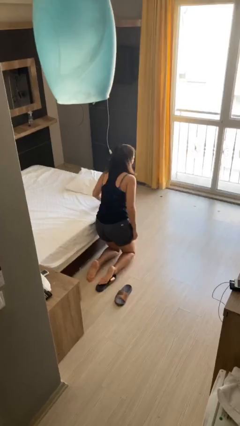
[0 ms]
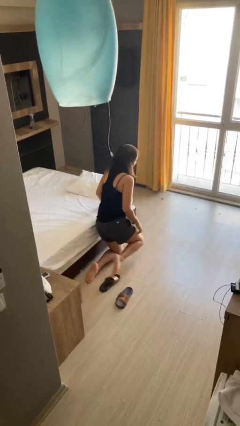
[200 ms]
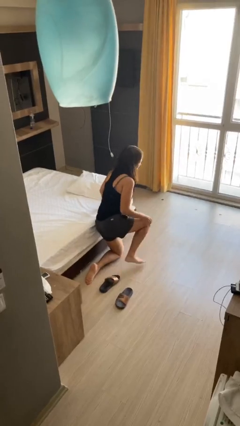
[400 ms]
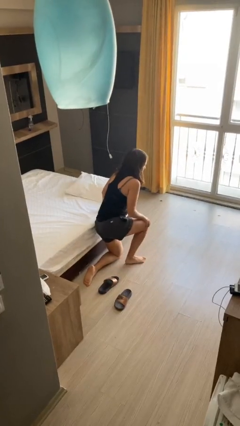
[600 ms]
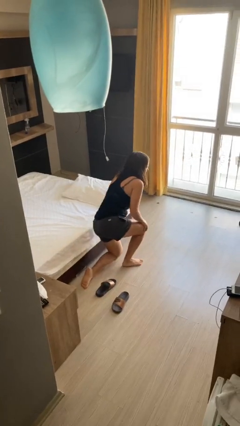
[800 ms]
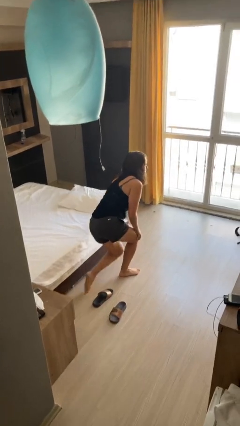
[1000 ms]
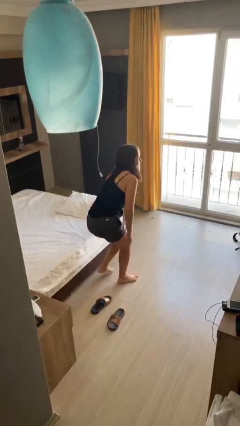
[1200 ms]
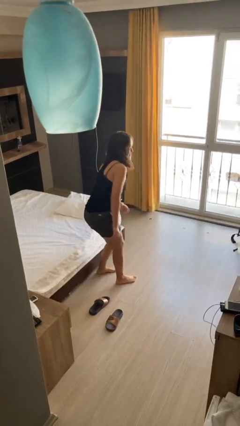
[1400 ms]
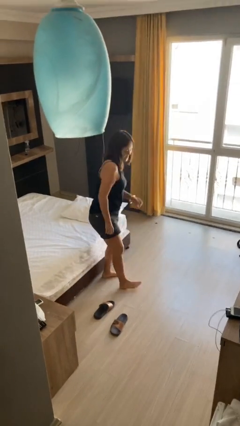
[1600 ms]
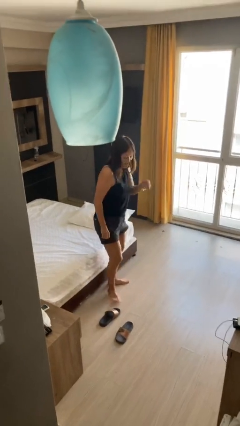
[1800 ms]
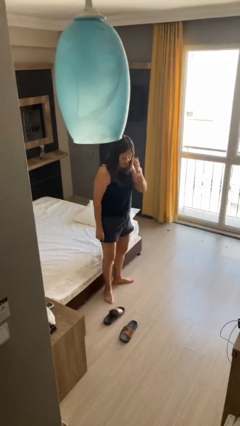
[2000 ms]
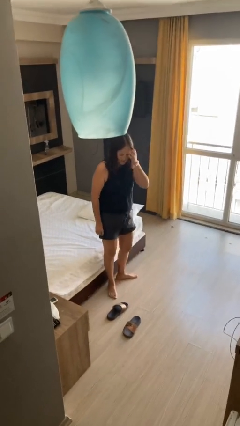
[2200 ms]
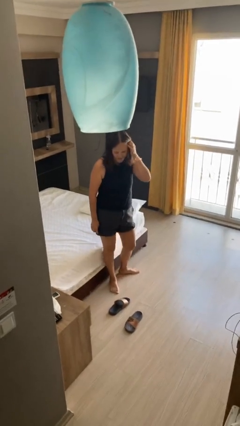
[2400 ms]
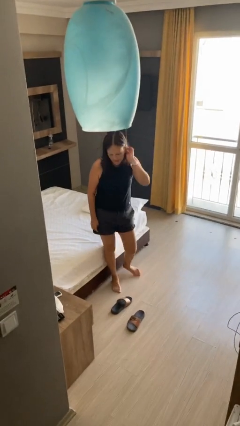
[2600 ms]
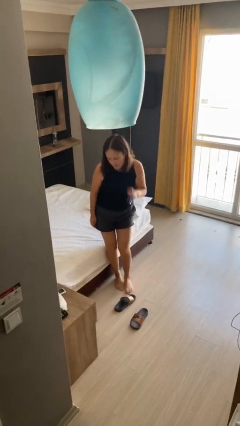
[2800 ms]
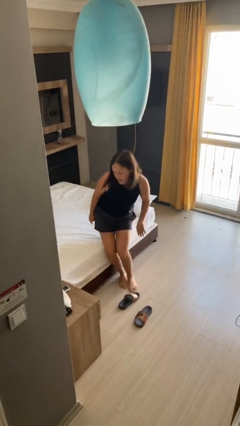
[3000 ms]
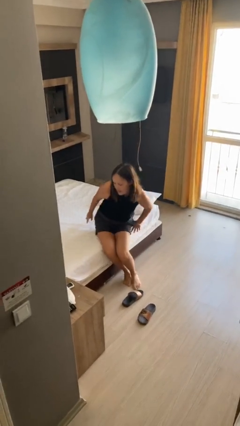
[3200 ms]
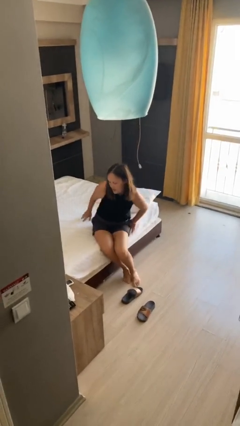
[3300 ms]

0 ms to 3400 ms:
person stands up from floor

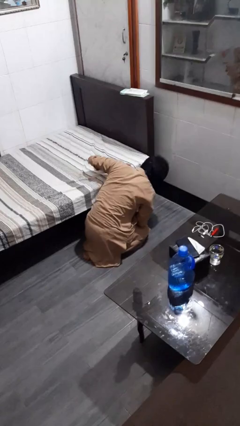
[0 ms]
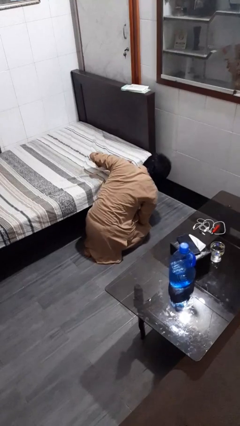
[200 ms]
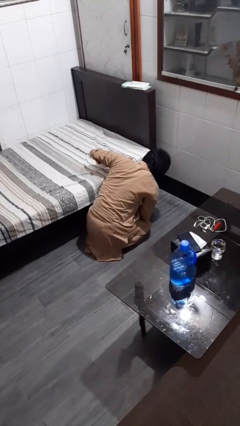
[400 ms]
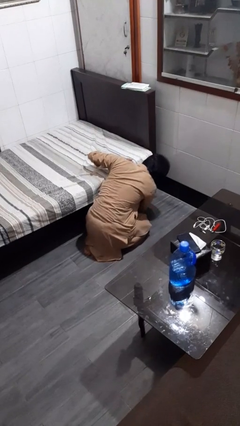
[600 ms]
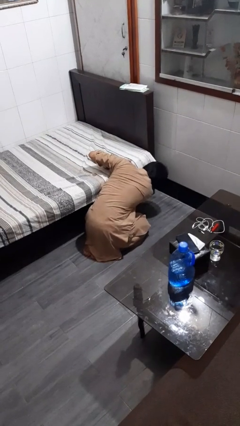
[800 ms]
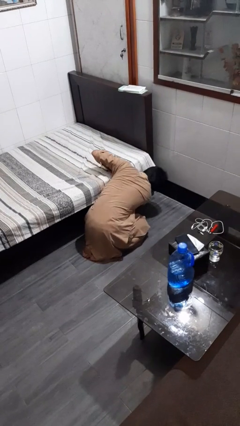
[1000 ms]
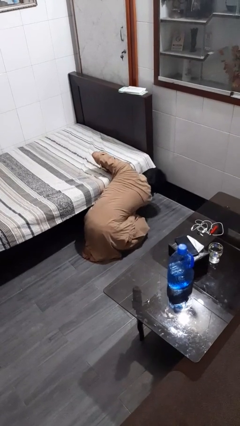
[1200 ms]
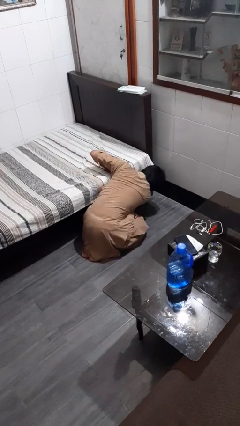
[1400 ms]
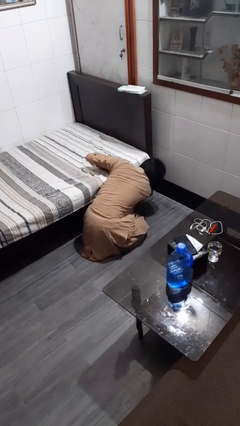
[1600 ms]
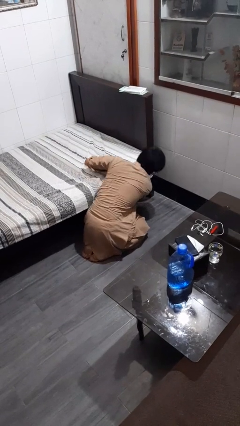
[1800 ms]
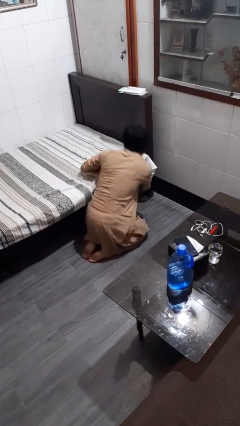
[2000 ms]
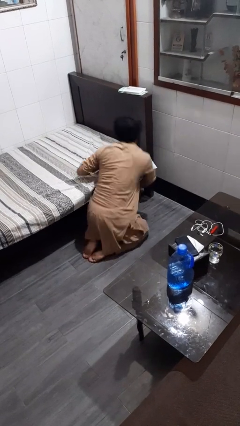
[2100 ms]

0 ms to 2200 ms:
person searches under bed

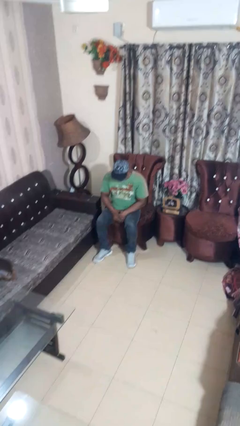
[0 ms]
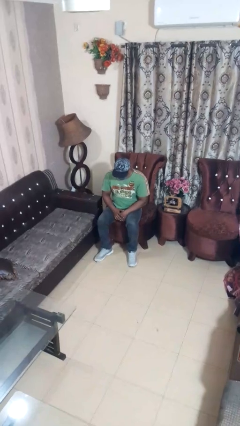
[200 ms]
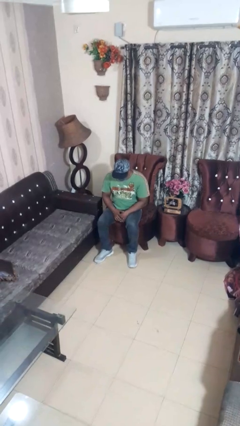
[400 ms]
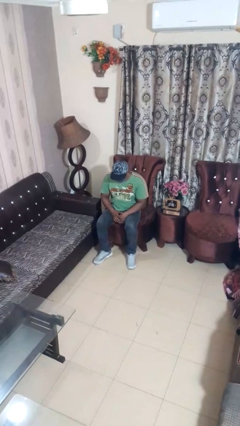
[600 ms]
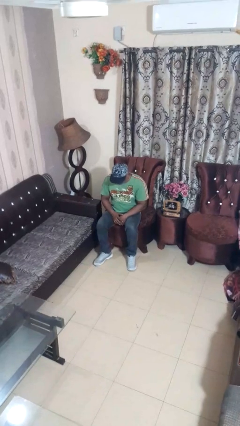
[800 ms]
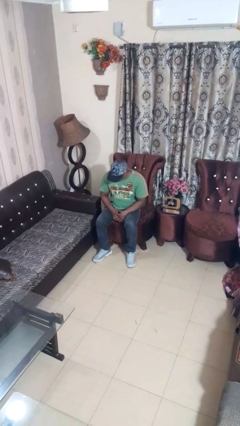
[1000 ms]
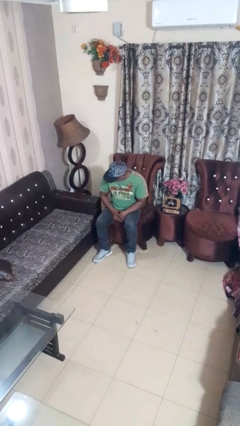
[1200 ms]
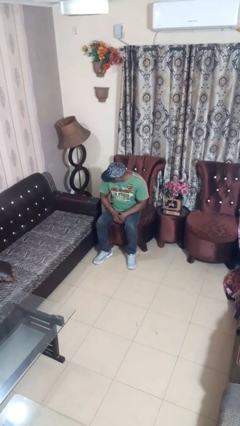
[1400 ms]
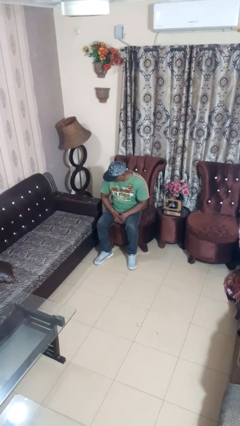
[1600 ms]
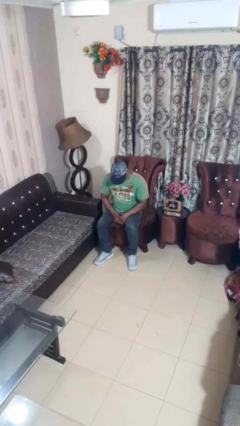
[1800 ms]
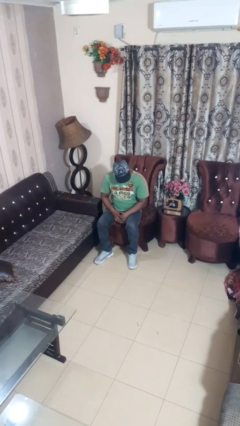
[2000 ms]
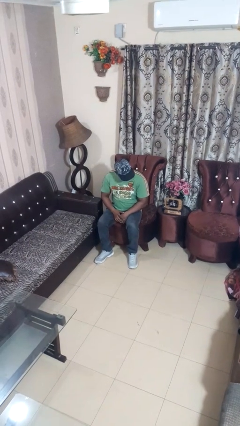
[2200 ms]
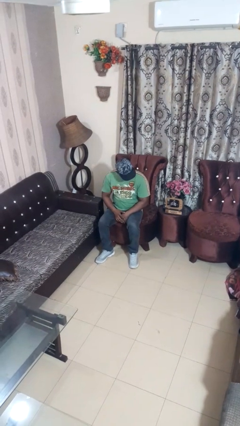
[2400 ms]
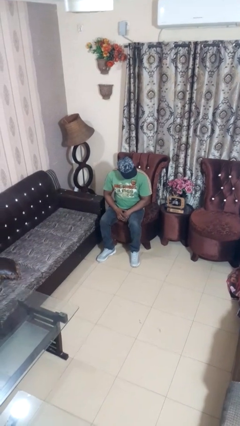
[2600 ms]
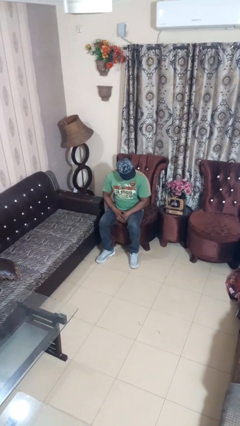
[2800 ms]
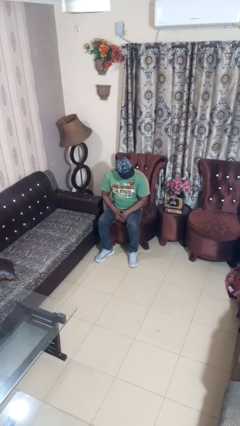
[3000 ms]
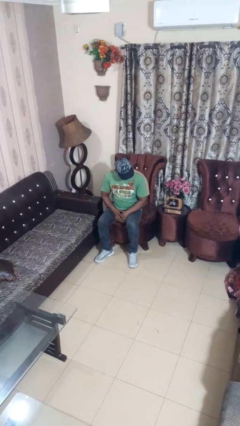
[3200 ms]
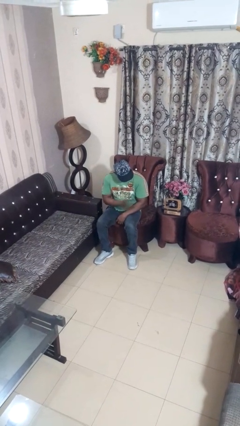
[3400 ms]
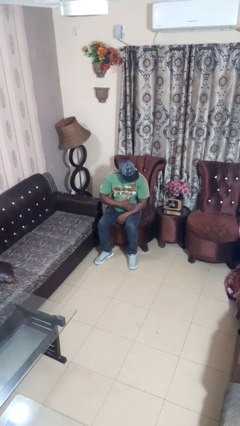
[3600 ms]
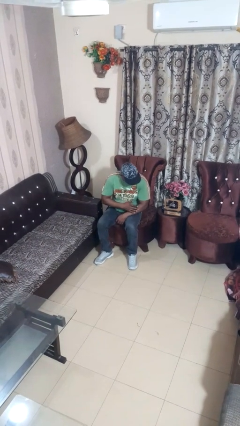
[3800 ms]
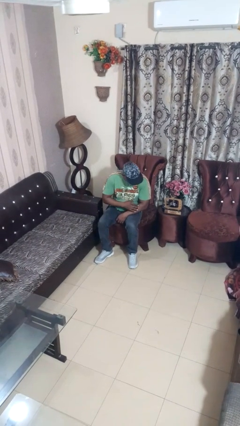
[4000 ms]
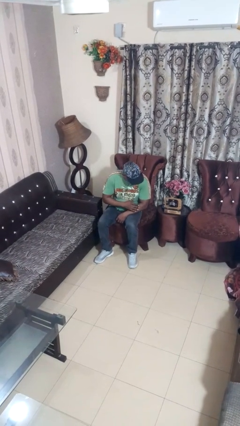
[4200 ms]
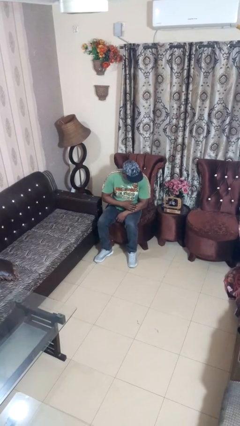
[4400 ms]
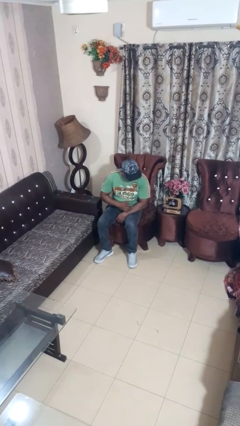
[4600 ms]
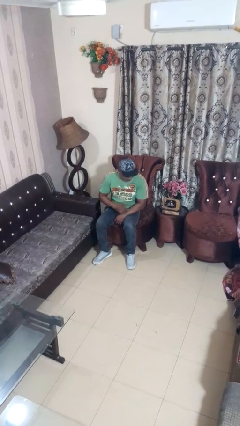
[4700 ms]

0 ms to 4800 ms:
person swats bug

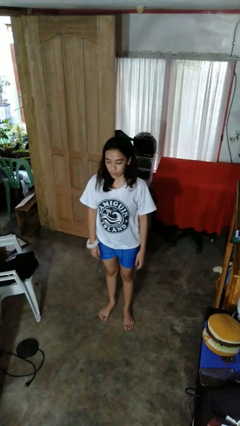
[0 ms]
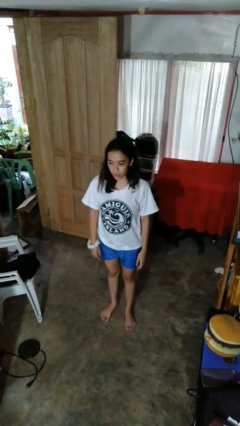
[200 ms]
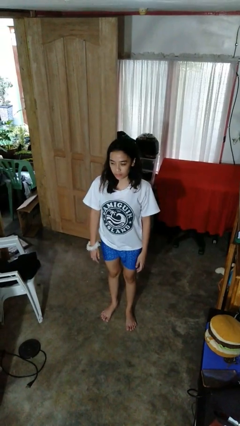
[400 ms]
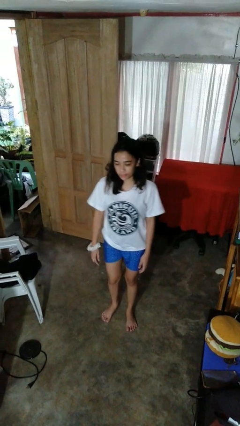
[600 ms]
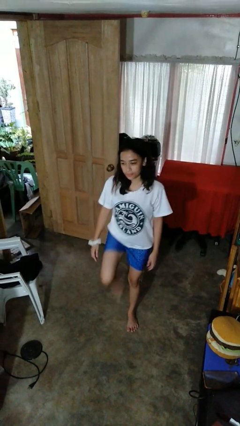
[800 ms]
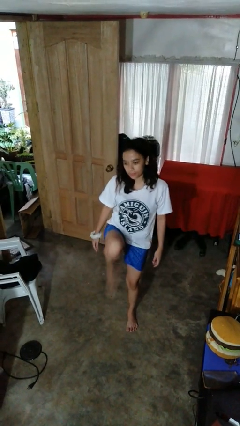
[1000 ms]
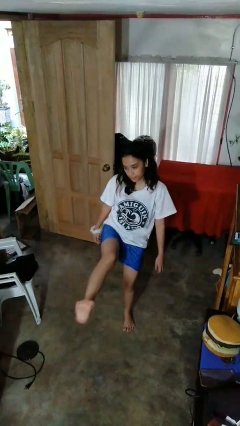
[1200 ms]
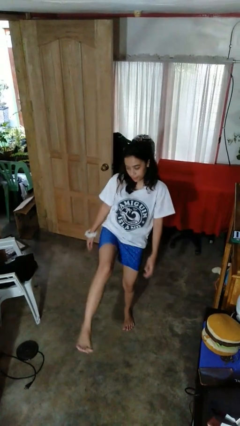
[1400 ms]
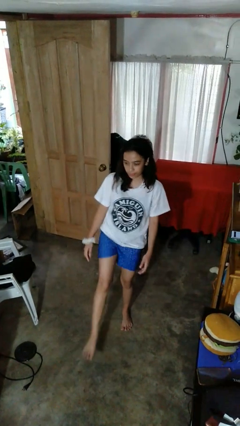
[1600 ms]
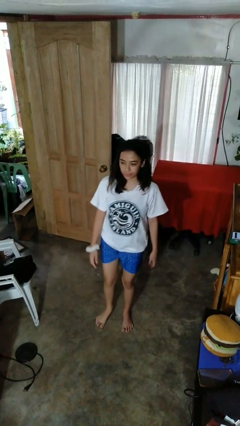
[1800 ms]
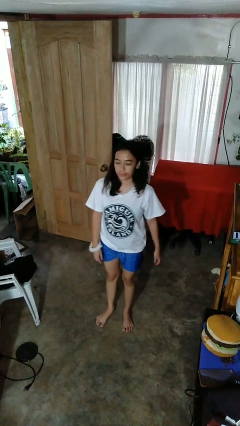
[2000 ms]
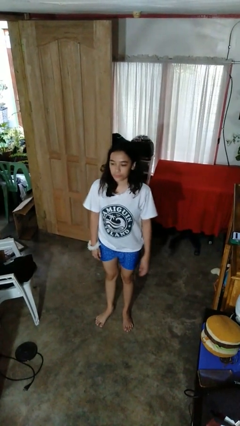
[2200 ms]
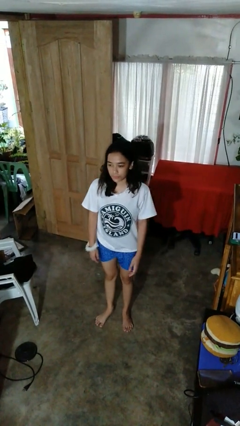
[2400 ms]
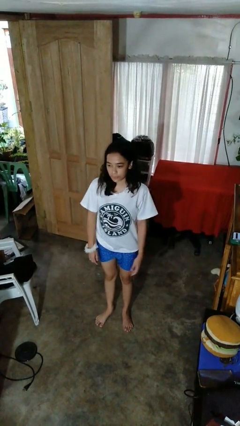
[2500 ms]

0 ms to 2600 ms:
person karate kicks

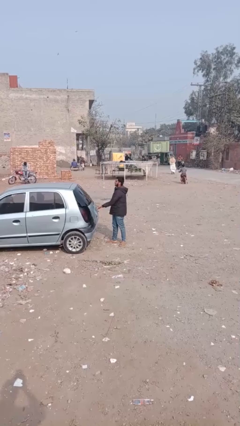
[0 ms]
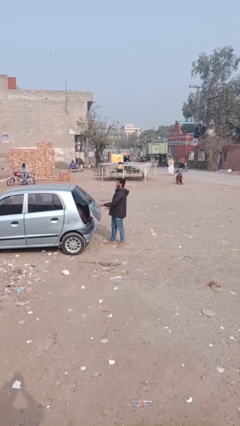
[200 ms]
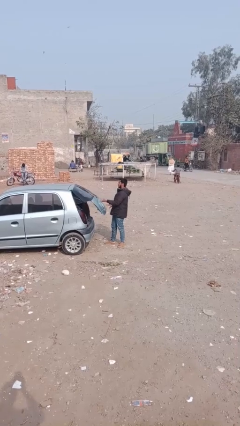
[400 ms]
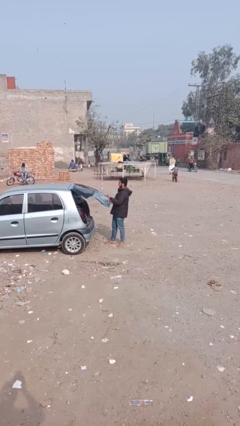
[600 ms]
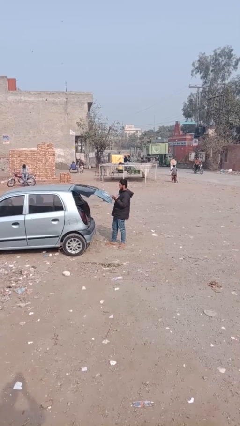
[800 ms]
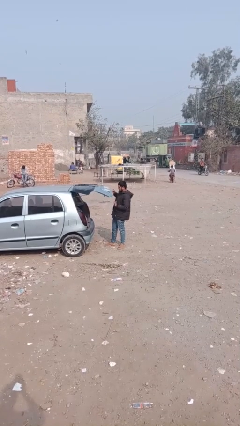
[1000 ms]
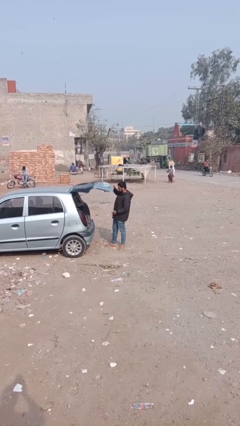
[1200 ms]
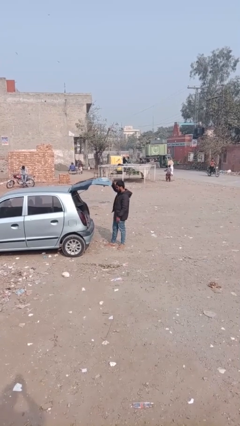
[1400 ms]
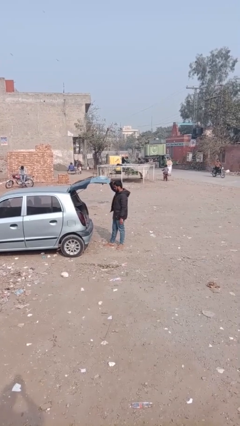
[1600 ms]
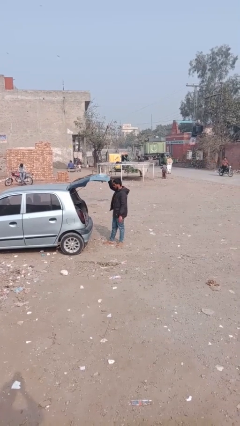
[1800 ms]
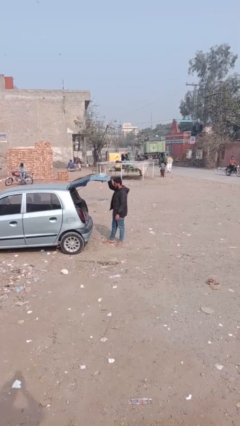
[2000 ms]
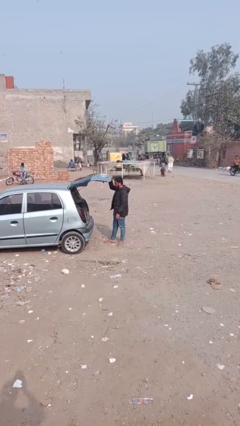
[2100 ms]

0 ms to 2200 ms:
person opens car trunk

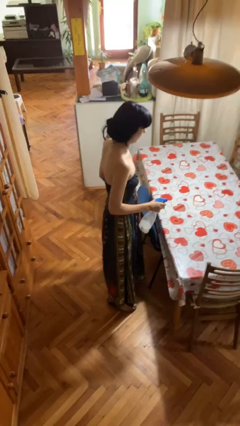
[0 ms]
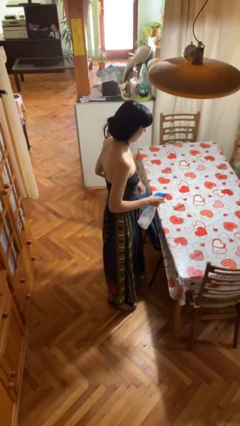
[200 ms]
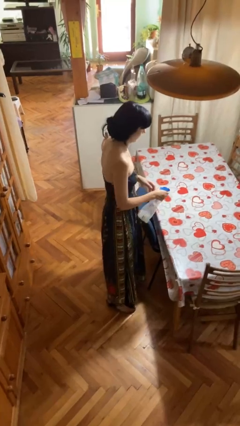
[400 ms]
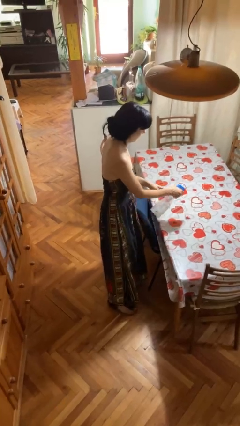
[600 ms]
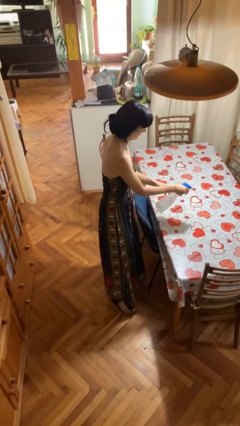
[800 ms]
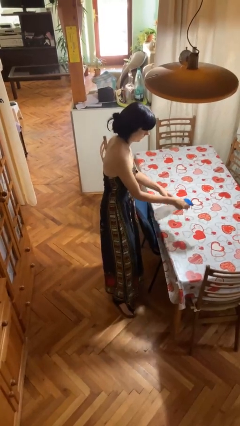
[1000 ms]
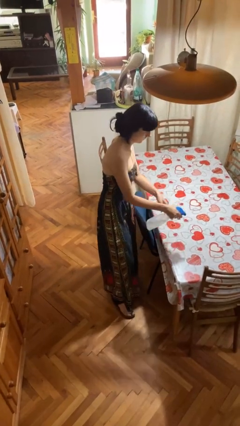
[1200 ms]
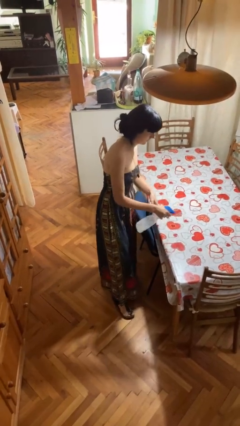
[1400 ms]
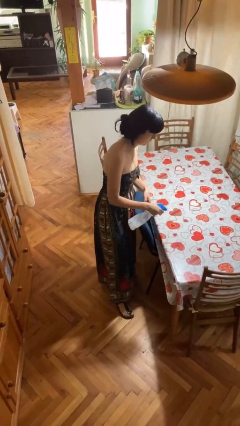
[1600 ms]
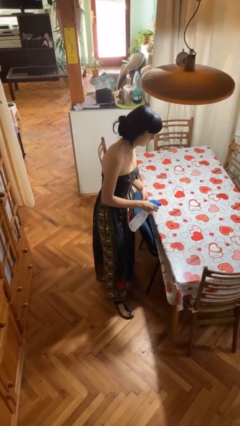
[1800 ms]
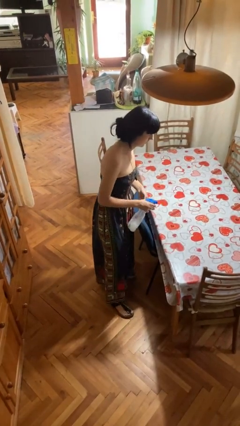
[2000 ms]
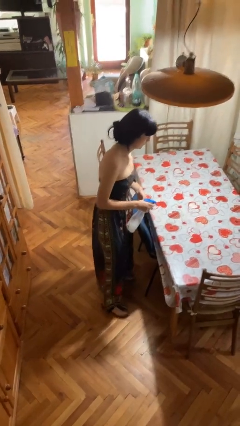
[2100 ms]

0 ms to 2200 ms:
person sprays from bottle
